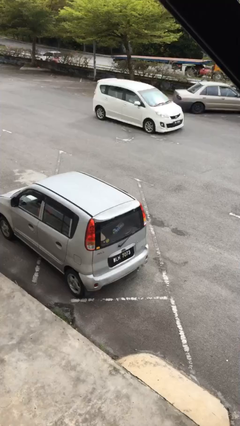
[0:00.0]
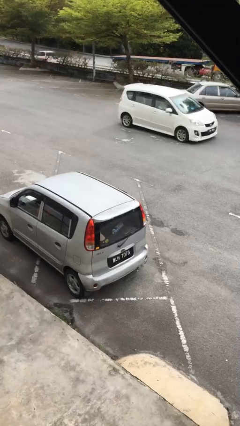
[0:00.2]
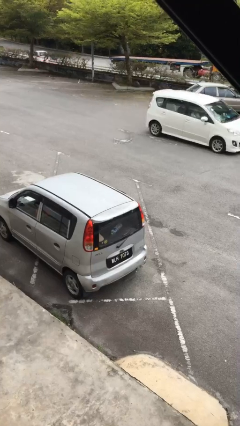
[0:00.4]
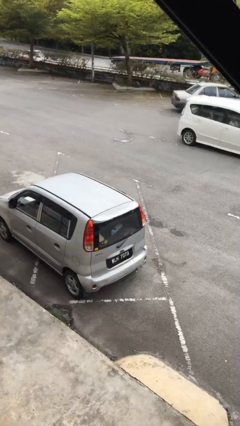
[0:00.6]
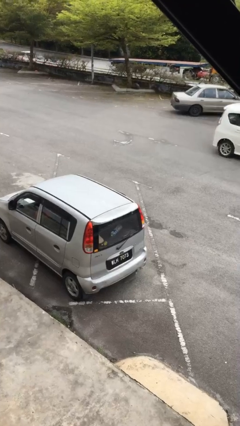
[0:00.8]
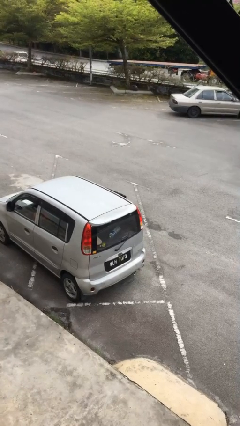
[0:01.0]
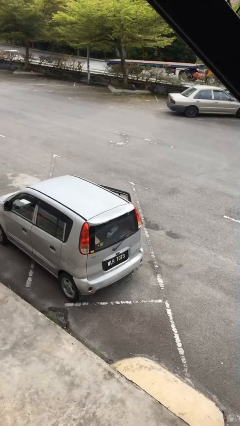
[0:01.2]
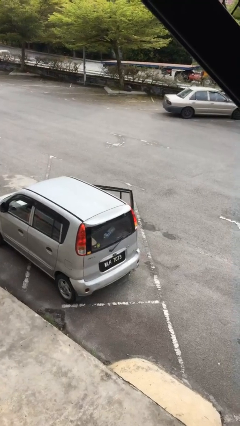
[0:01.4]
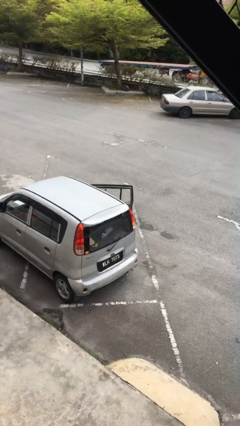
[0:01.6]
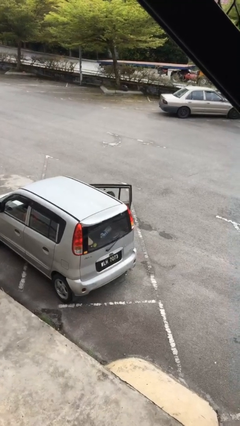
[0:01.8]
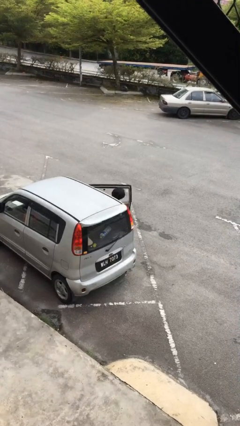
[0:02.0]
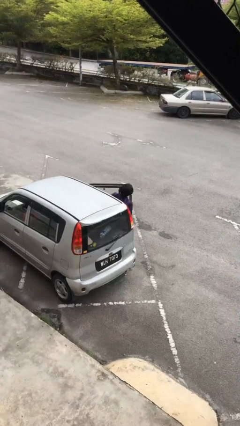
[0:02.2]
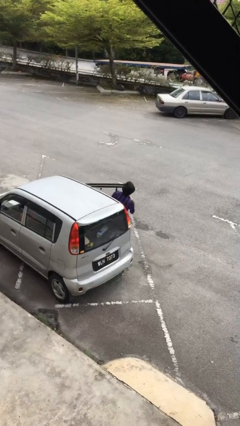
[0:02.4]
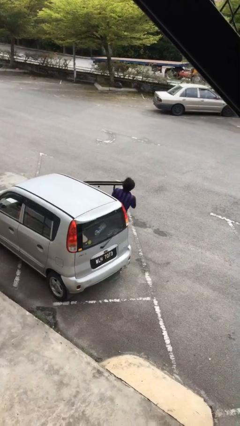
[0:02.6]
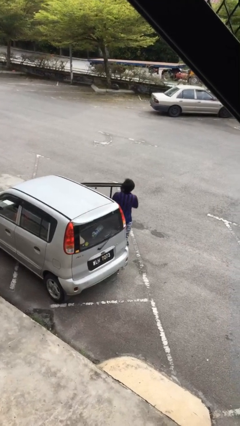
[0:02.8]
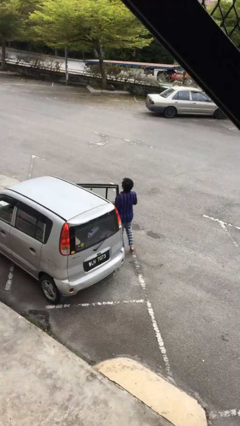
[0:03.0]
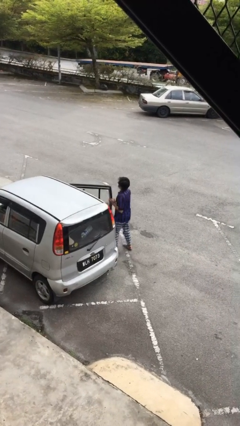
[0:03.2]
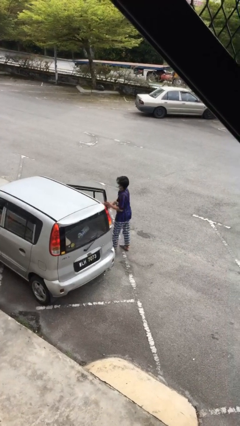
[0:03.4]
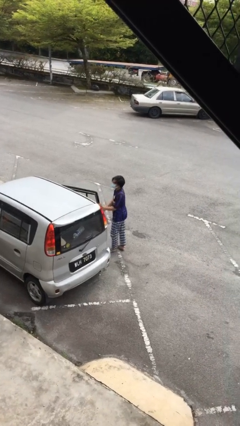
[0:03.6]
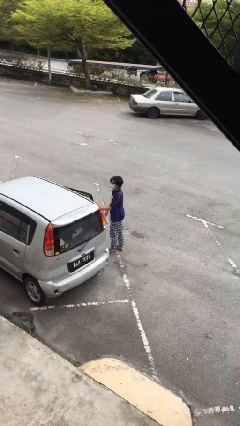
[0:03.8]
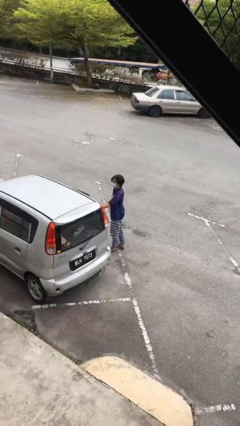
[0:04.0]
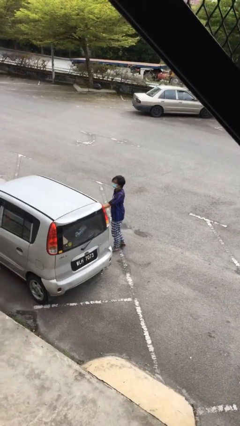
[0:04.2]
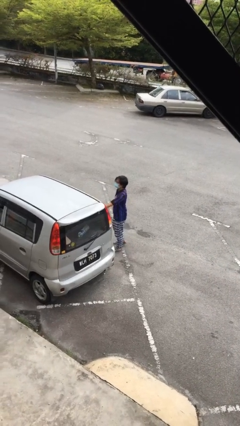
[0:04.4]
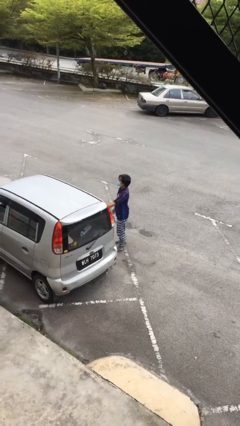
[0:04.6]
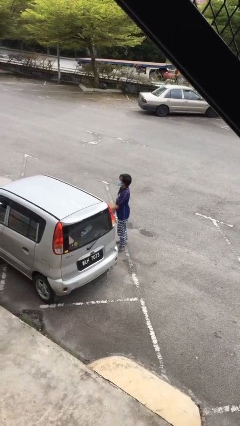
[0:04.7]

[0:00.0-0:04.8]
person exits car

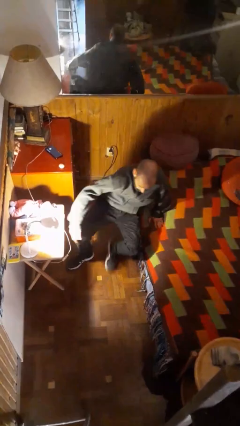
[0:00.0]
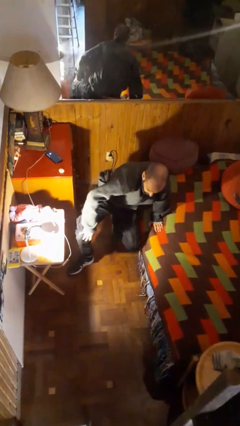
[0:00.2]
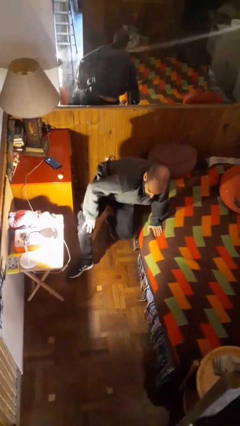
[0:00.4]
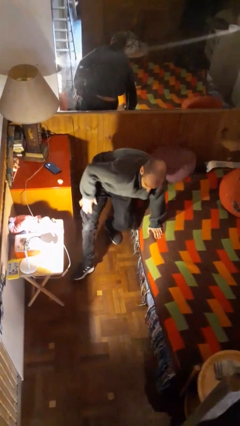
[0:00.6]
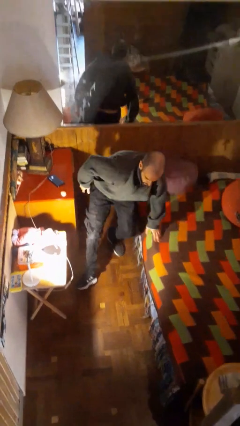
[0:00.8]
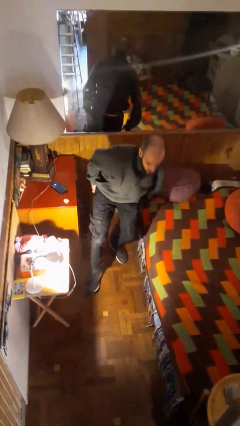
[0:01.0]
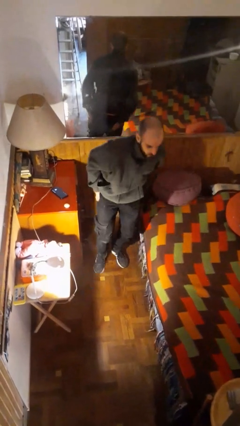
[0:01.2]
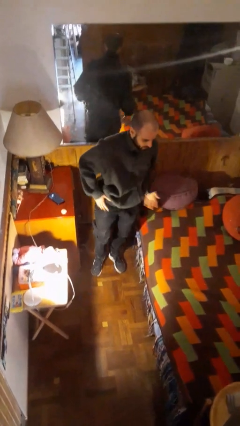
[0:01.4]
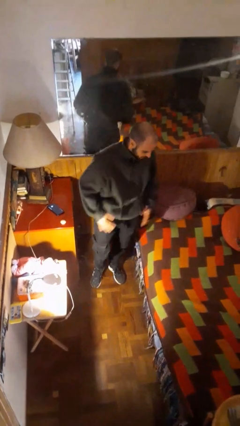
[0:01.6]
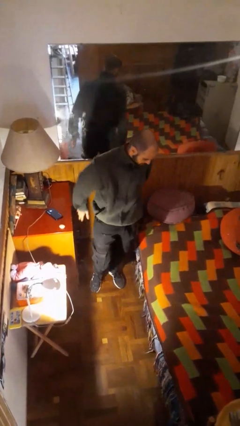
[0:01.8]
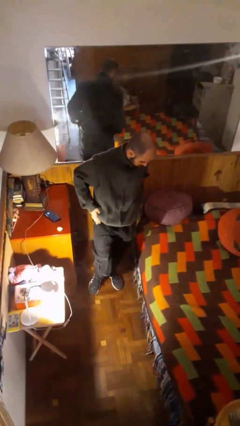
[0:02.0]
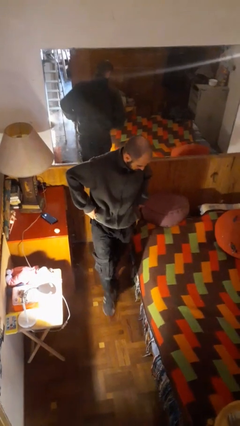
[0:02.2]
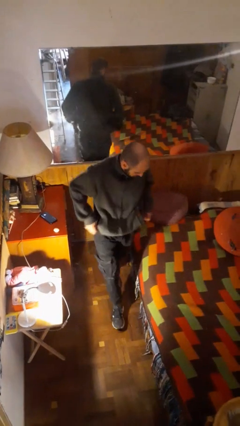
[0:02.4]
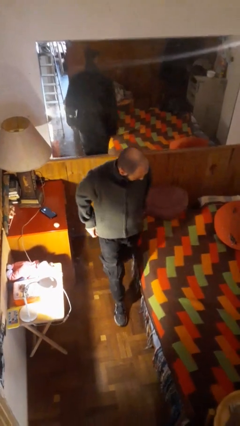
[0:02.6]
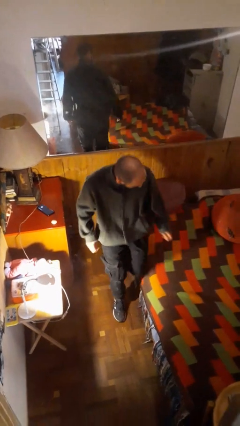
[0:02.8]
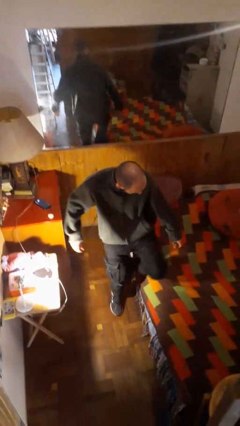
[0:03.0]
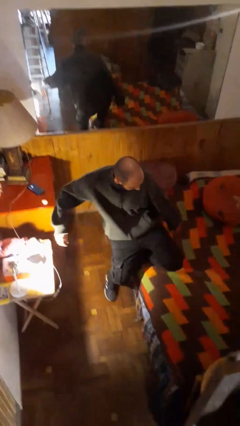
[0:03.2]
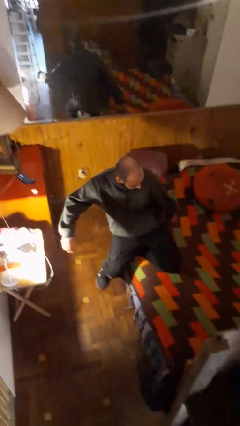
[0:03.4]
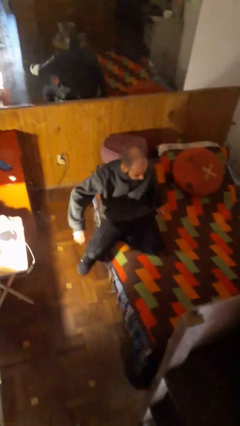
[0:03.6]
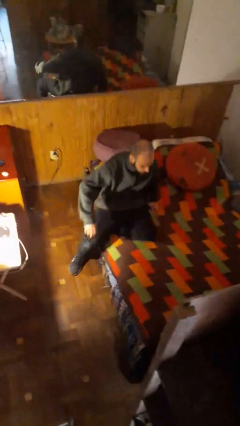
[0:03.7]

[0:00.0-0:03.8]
person stands up from floor

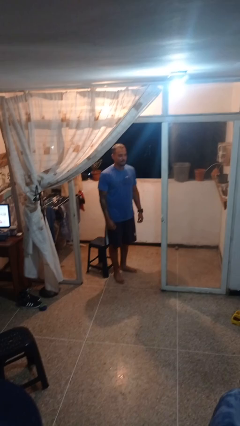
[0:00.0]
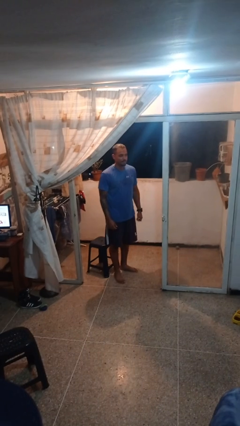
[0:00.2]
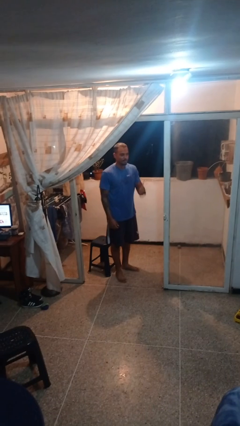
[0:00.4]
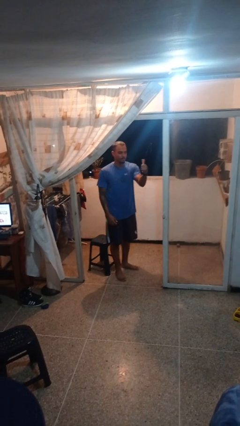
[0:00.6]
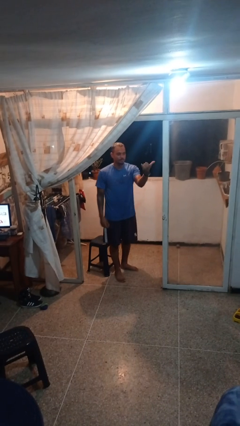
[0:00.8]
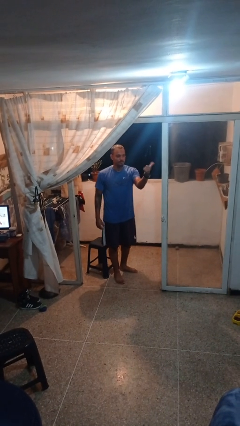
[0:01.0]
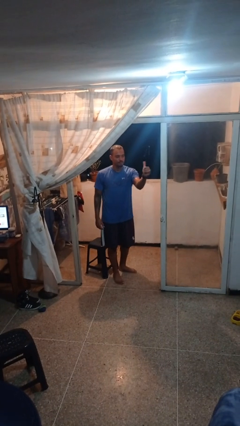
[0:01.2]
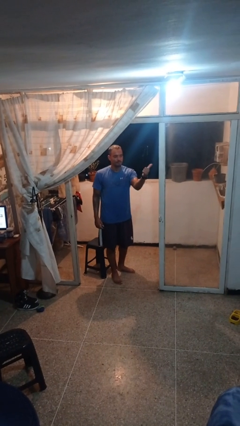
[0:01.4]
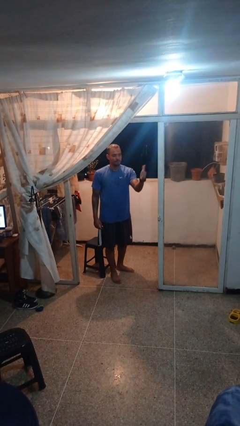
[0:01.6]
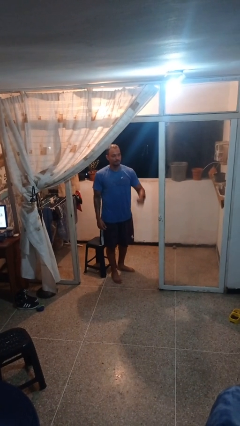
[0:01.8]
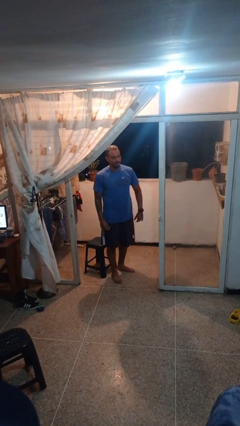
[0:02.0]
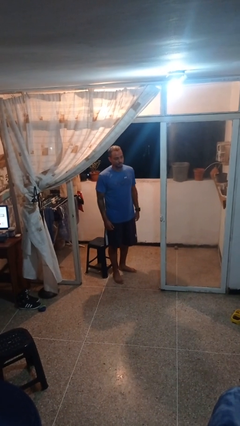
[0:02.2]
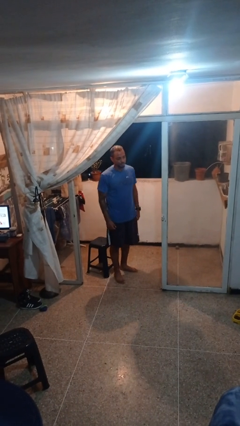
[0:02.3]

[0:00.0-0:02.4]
person gestures hang loose

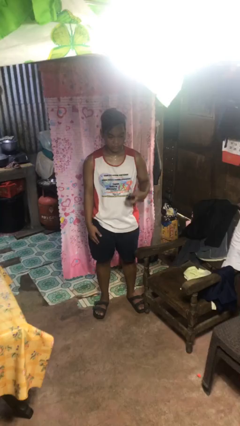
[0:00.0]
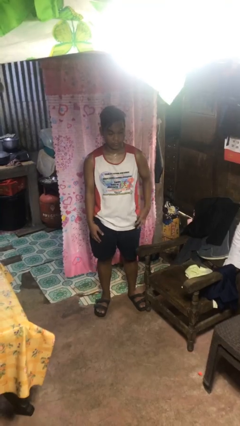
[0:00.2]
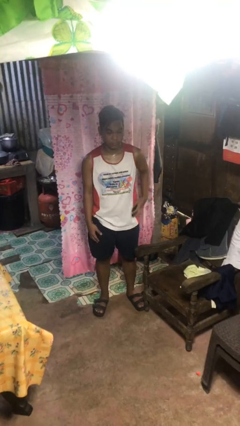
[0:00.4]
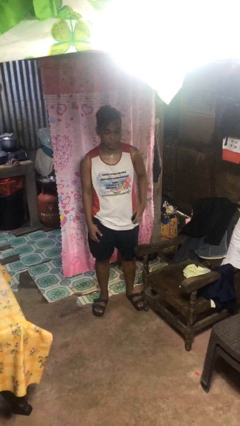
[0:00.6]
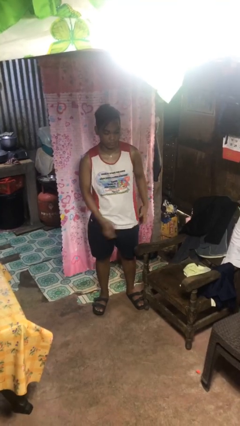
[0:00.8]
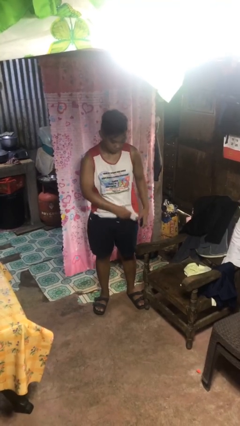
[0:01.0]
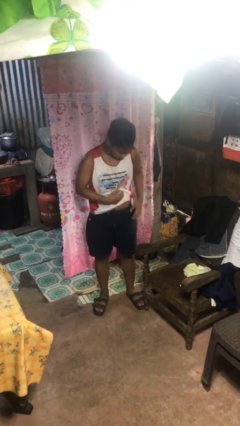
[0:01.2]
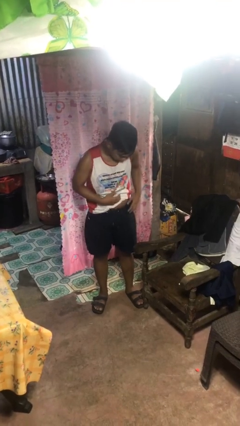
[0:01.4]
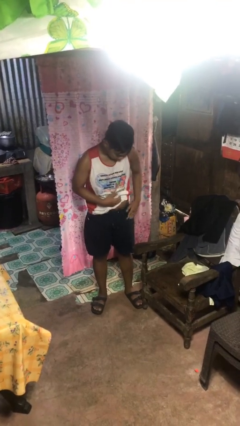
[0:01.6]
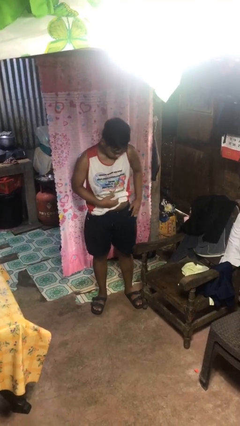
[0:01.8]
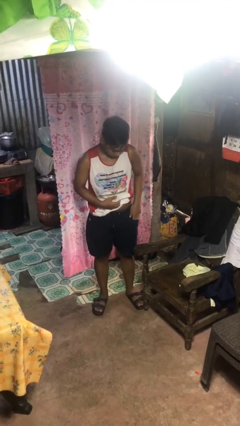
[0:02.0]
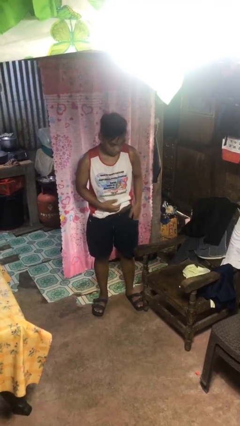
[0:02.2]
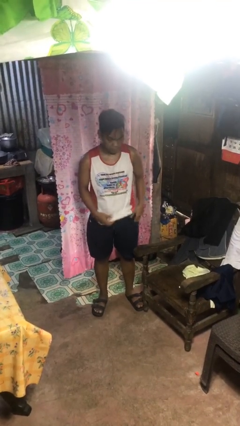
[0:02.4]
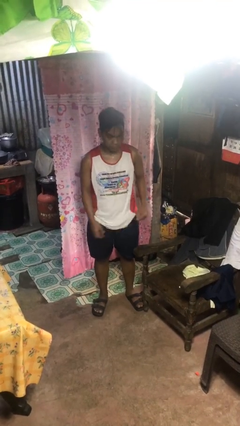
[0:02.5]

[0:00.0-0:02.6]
person puts phone into pocket

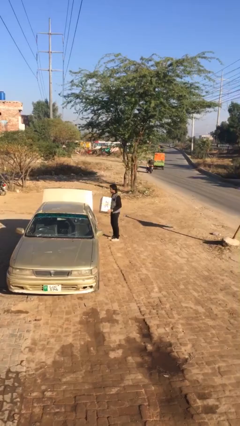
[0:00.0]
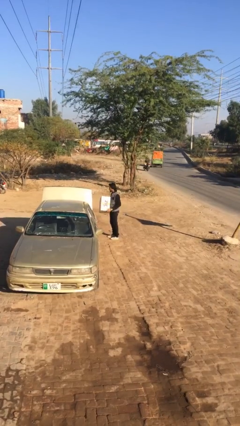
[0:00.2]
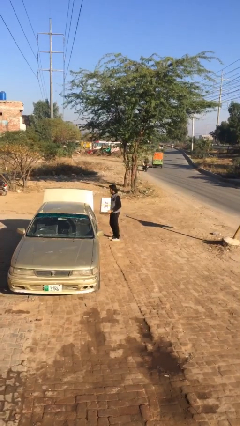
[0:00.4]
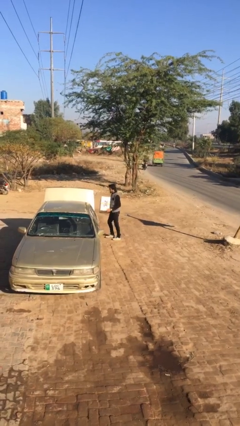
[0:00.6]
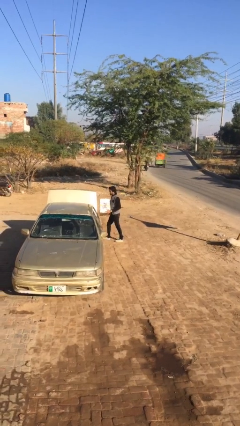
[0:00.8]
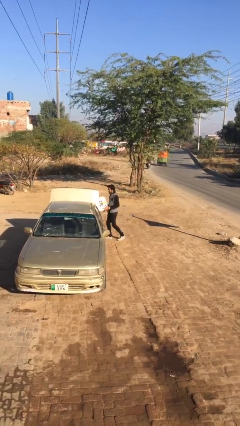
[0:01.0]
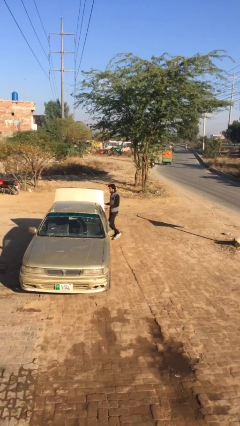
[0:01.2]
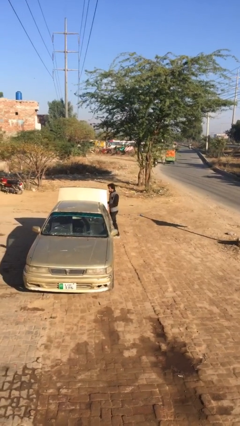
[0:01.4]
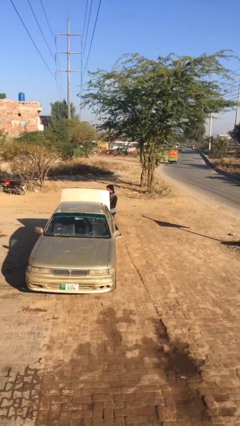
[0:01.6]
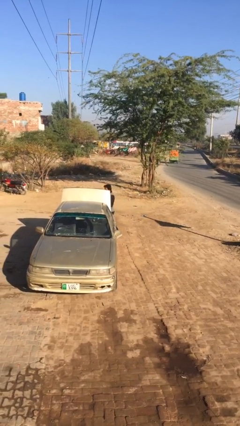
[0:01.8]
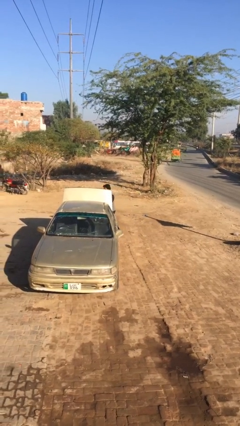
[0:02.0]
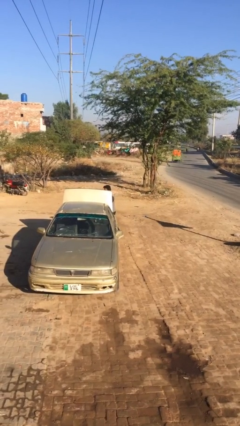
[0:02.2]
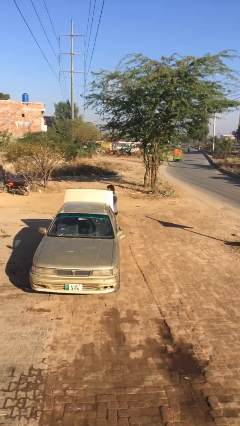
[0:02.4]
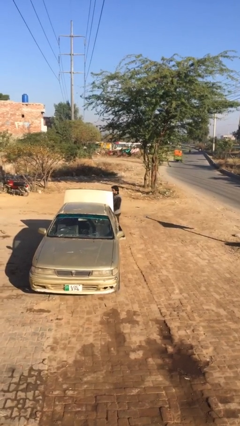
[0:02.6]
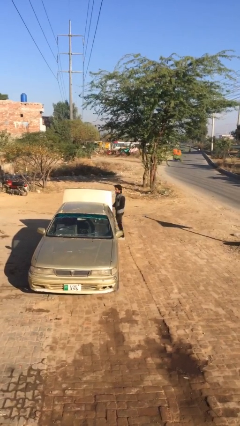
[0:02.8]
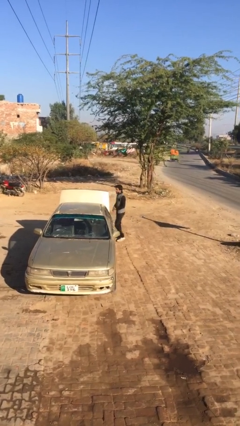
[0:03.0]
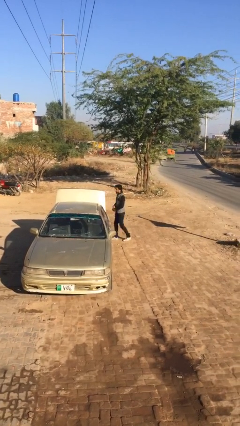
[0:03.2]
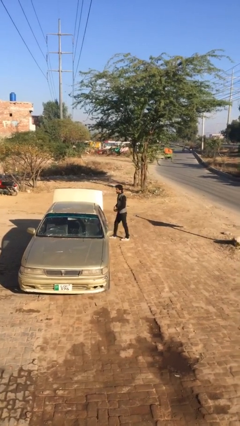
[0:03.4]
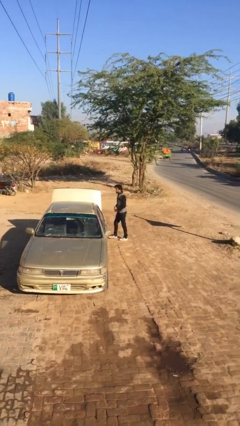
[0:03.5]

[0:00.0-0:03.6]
person loads car

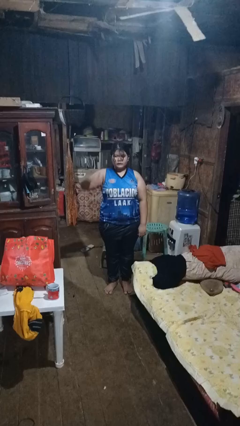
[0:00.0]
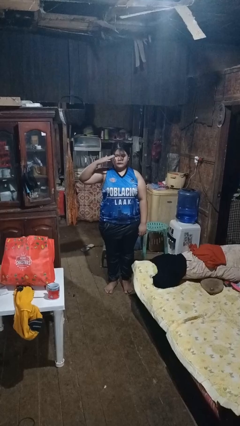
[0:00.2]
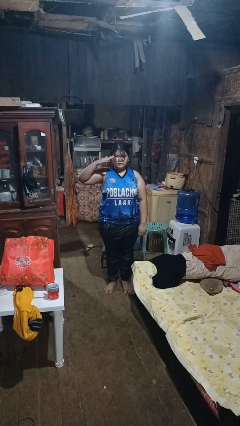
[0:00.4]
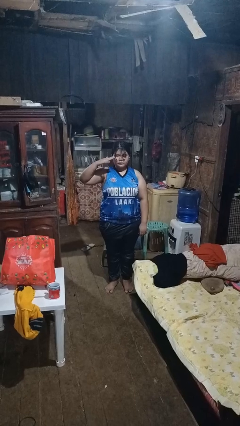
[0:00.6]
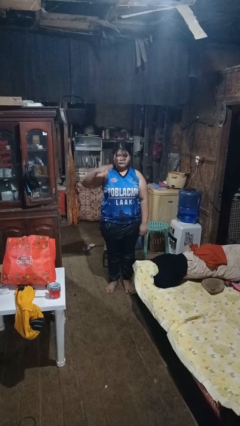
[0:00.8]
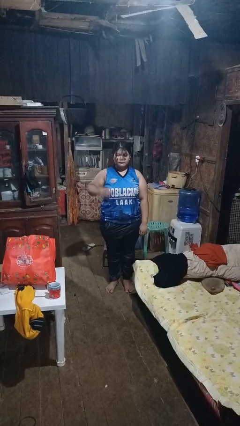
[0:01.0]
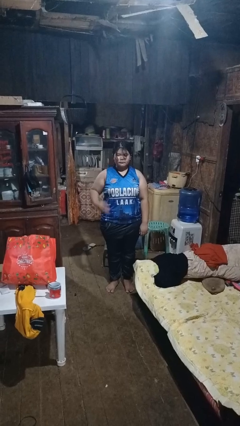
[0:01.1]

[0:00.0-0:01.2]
person salutes
